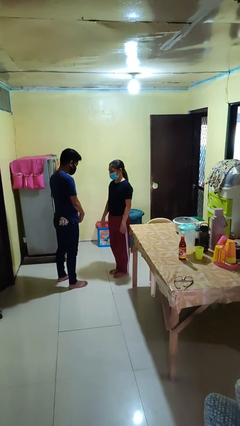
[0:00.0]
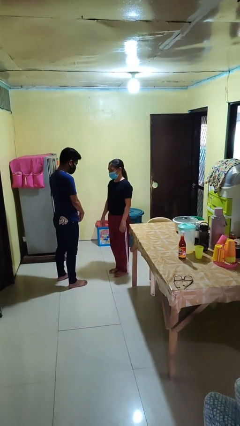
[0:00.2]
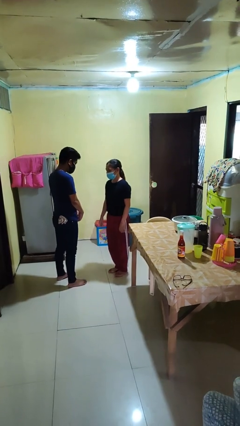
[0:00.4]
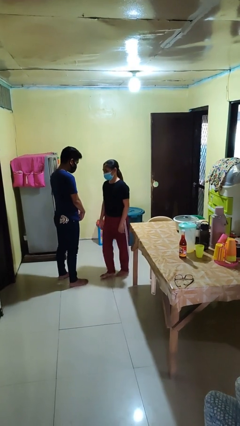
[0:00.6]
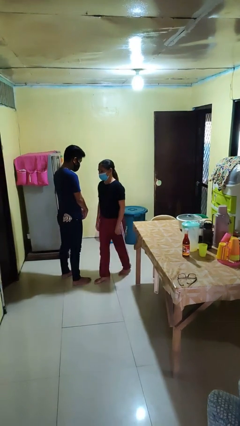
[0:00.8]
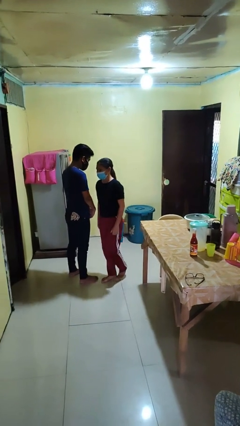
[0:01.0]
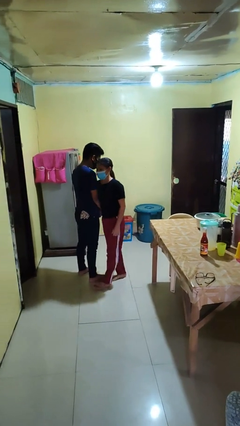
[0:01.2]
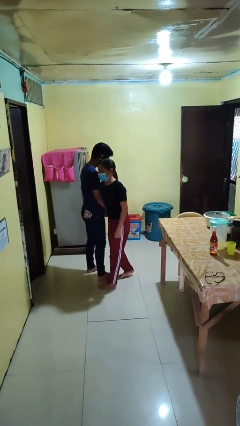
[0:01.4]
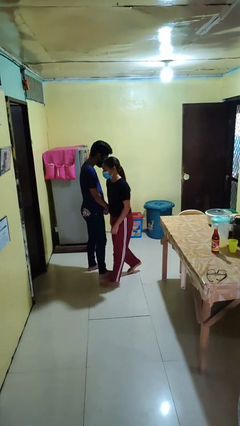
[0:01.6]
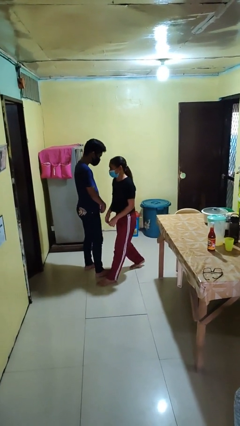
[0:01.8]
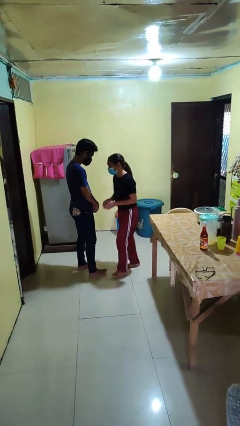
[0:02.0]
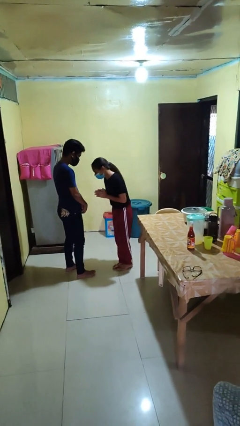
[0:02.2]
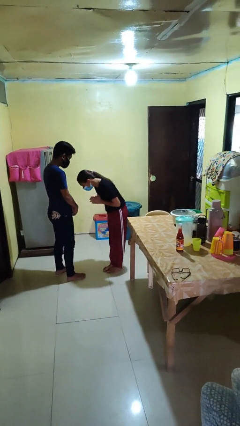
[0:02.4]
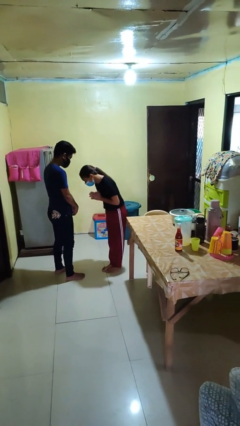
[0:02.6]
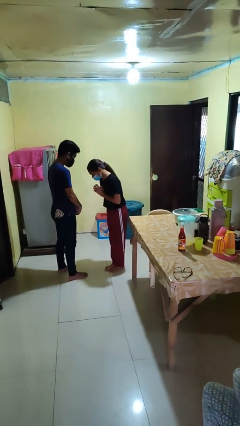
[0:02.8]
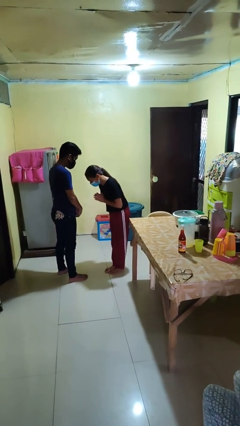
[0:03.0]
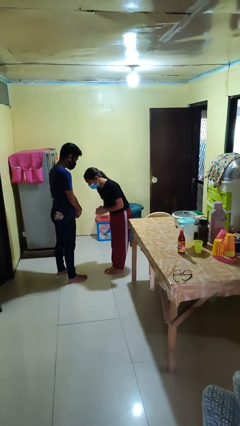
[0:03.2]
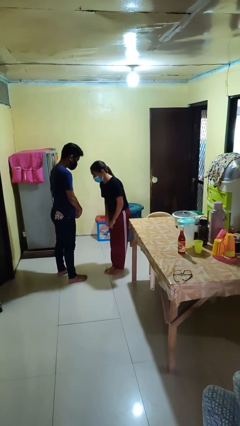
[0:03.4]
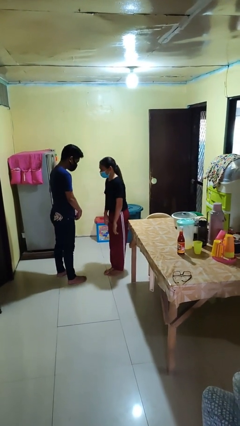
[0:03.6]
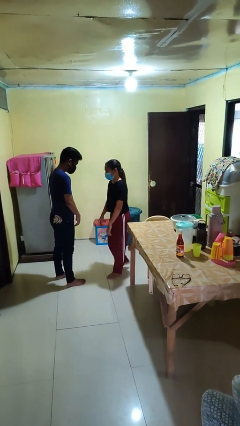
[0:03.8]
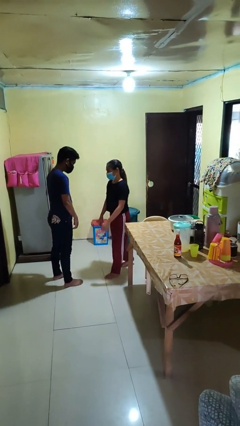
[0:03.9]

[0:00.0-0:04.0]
person bumps into person

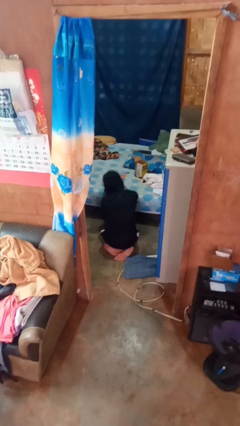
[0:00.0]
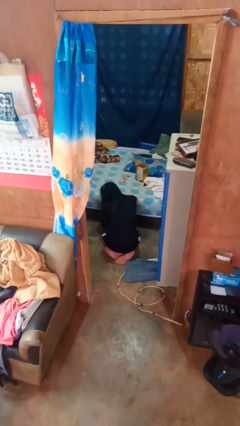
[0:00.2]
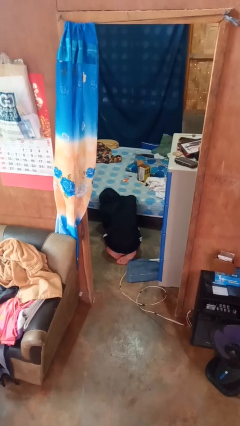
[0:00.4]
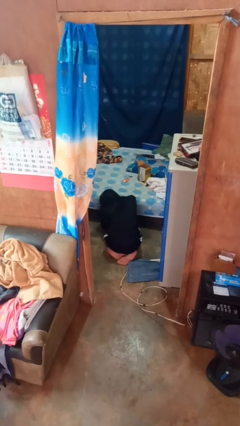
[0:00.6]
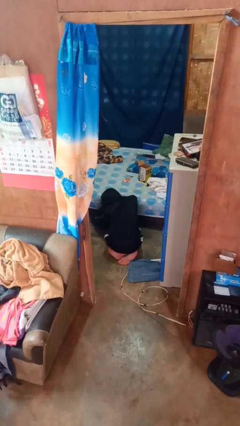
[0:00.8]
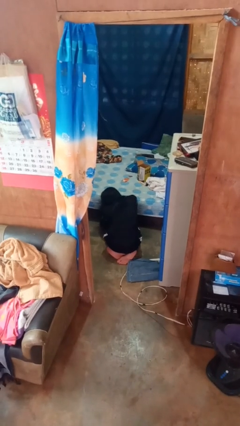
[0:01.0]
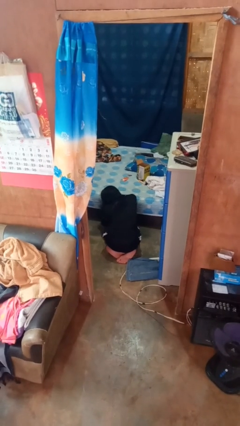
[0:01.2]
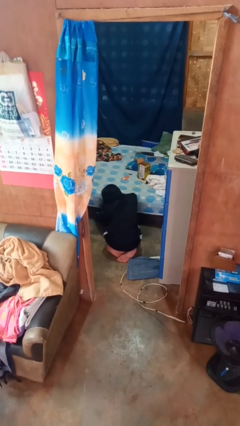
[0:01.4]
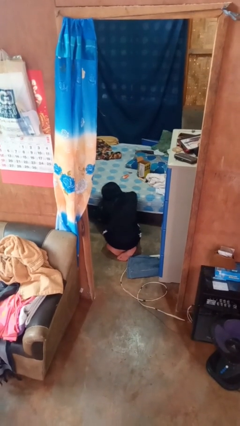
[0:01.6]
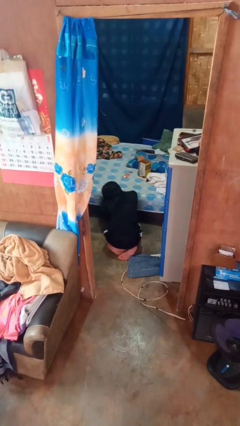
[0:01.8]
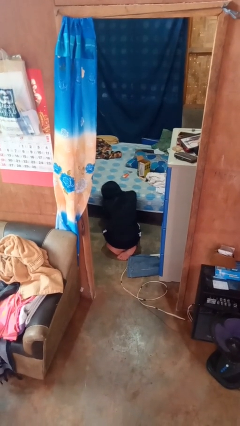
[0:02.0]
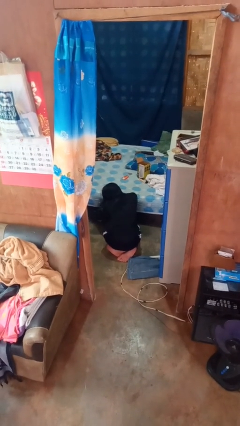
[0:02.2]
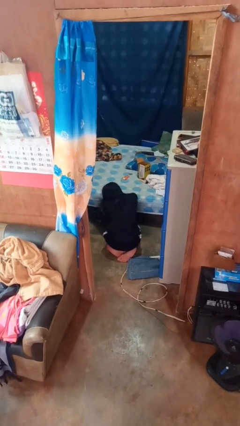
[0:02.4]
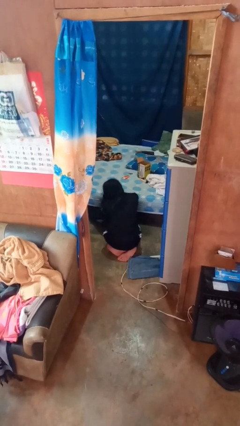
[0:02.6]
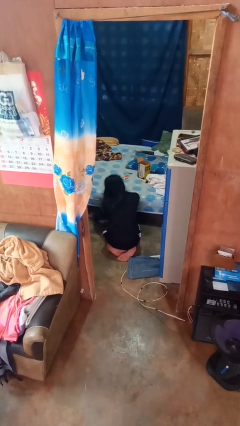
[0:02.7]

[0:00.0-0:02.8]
person searches under bed

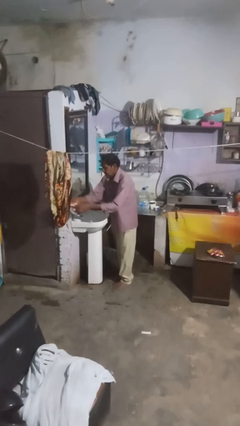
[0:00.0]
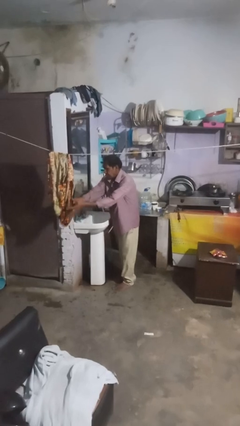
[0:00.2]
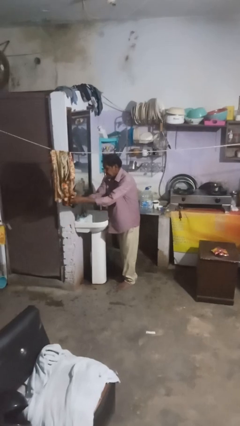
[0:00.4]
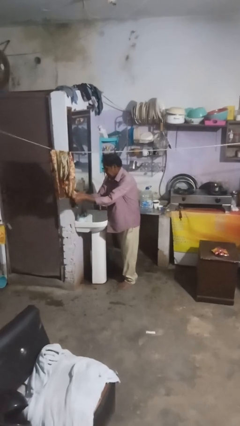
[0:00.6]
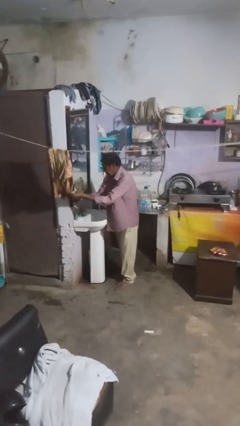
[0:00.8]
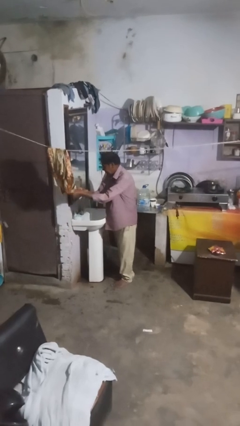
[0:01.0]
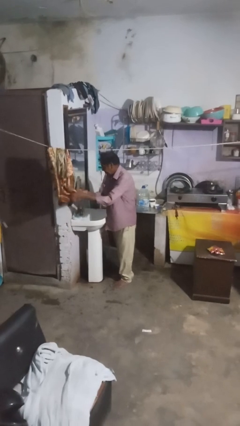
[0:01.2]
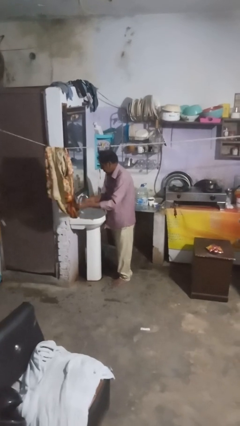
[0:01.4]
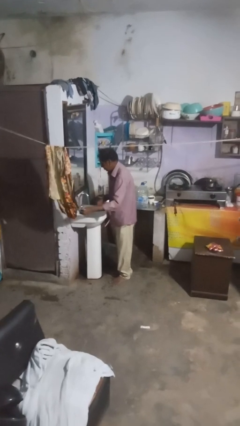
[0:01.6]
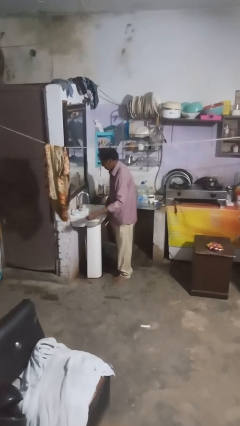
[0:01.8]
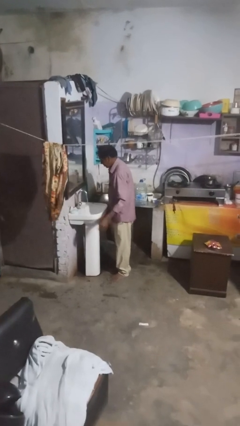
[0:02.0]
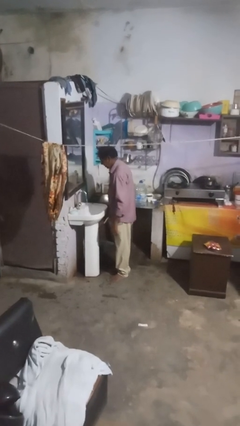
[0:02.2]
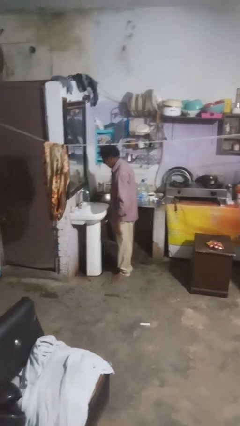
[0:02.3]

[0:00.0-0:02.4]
person dries hands with towel

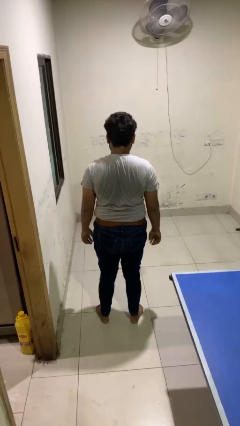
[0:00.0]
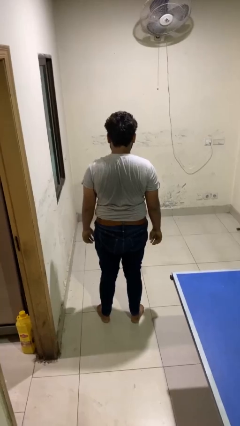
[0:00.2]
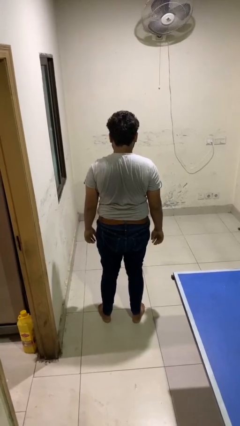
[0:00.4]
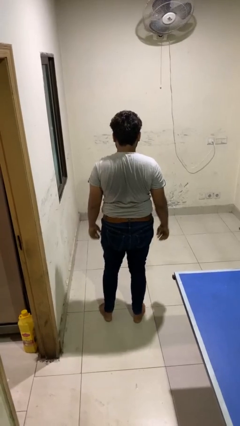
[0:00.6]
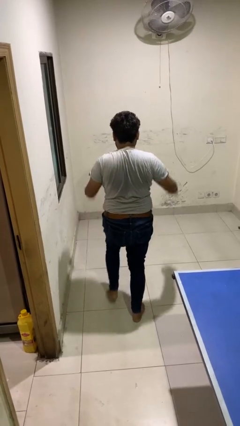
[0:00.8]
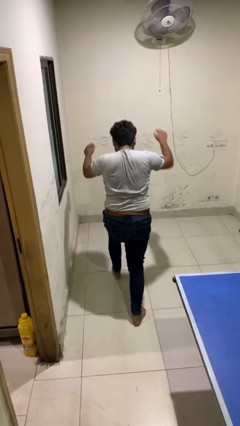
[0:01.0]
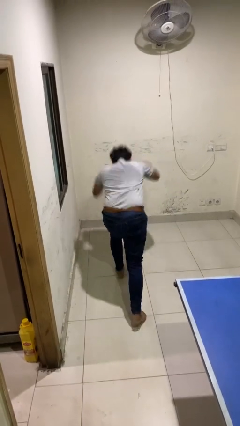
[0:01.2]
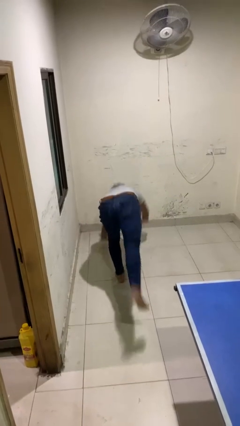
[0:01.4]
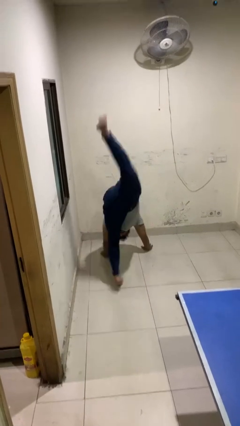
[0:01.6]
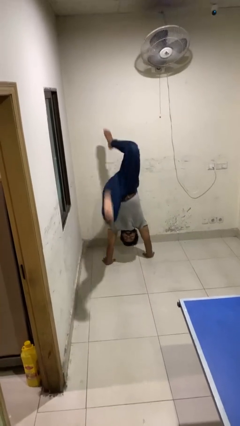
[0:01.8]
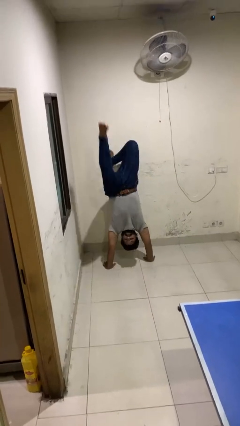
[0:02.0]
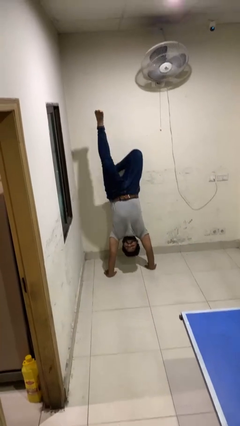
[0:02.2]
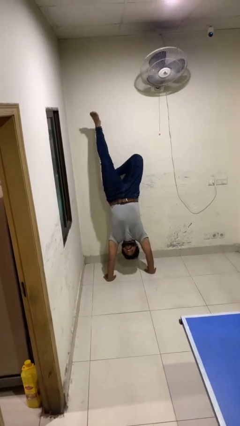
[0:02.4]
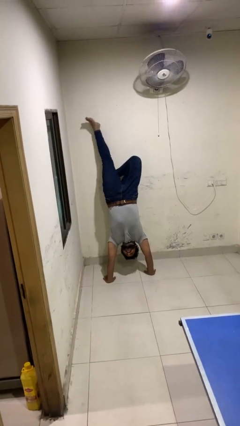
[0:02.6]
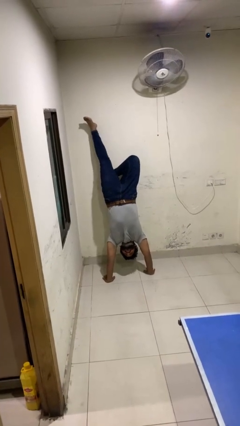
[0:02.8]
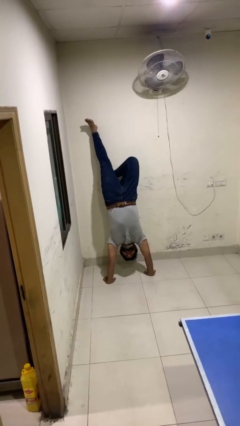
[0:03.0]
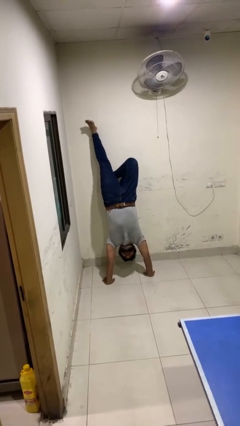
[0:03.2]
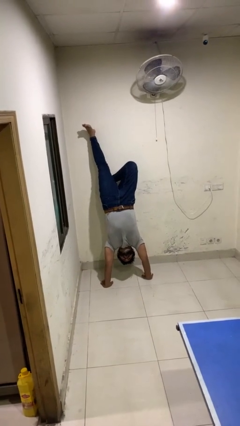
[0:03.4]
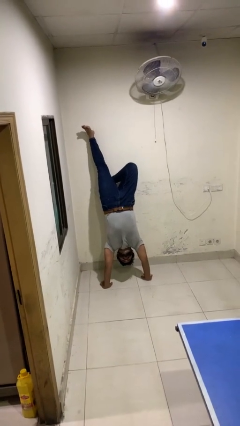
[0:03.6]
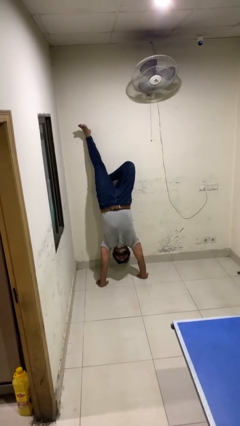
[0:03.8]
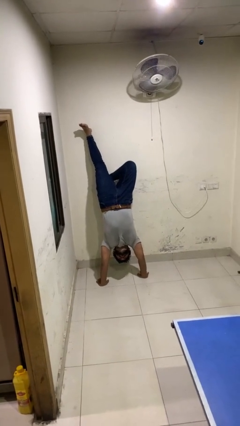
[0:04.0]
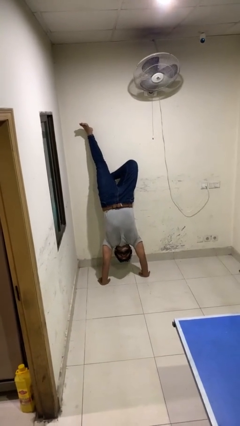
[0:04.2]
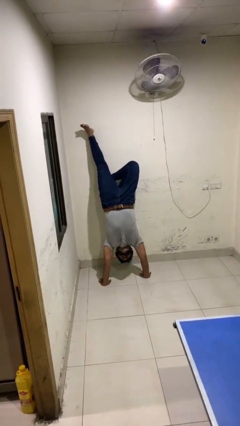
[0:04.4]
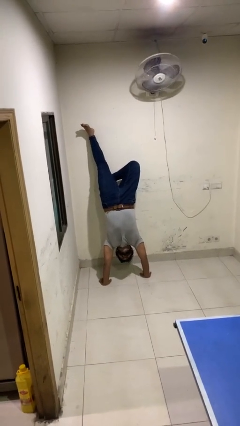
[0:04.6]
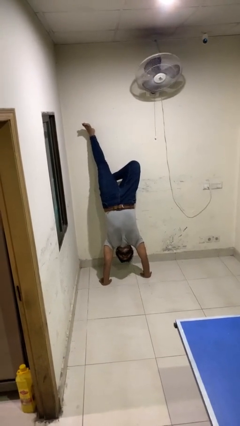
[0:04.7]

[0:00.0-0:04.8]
person handstand

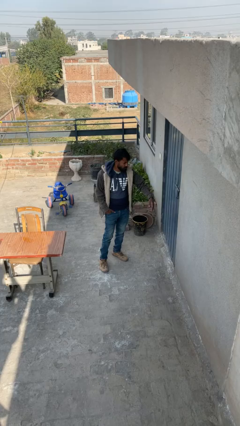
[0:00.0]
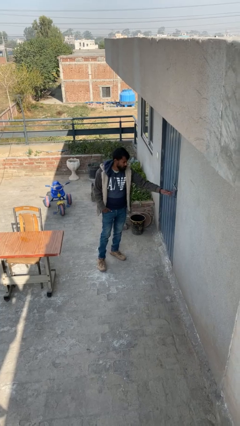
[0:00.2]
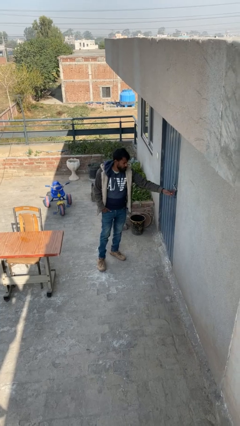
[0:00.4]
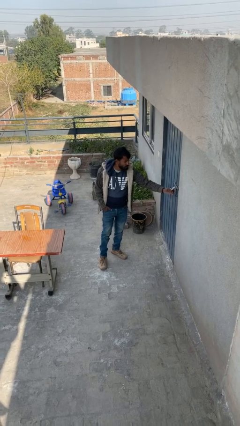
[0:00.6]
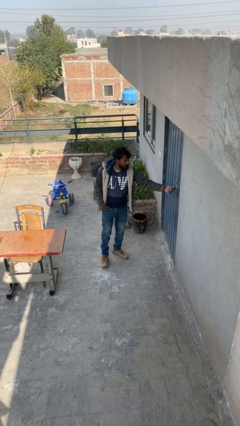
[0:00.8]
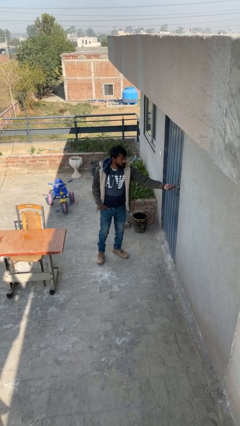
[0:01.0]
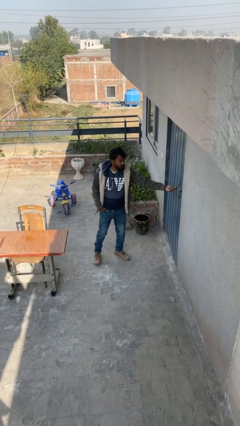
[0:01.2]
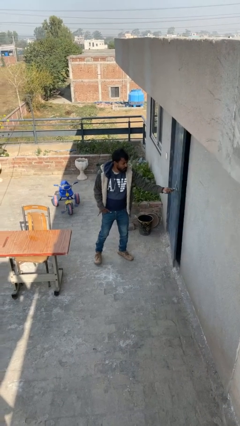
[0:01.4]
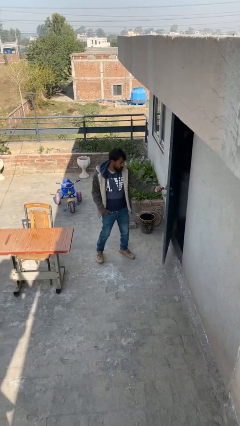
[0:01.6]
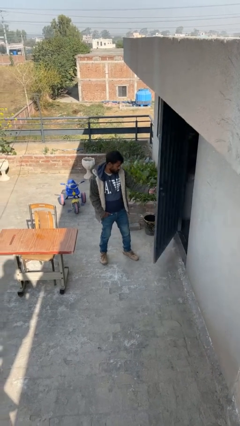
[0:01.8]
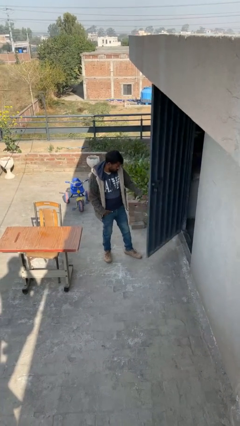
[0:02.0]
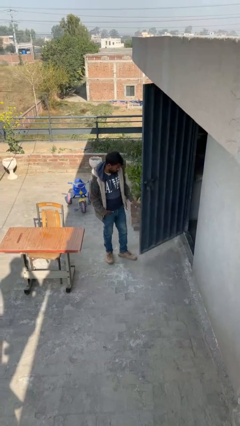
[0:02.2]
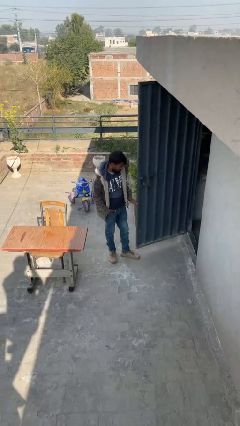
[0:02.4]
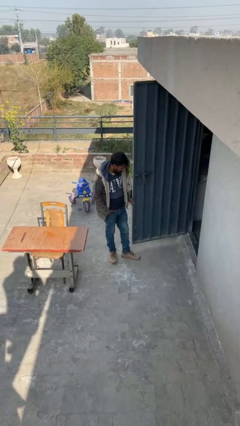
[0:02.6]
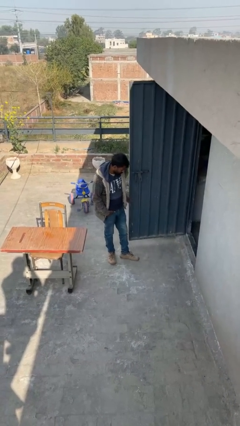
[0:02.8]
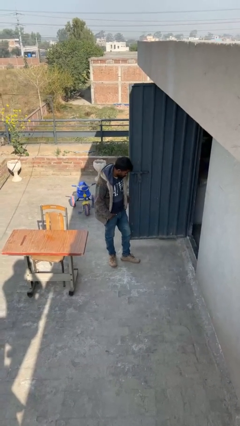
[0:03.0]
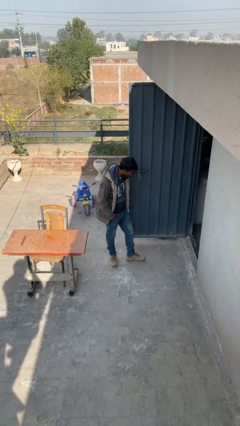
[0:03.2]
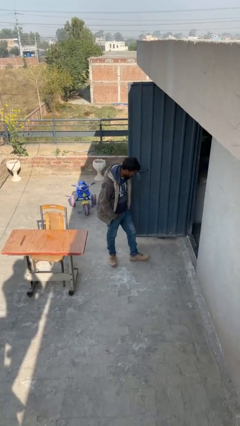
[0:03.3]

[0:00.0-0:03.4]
person opens facility door

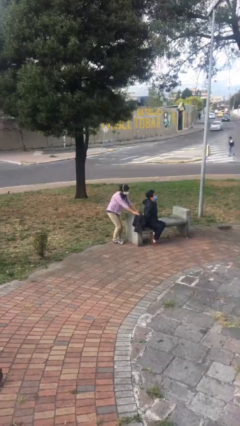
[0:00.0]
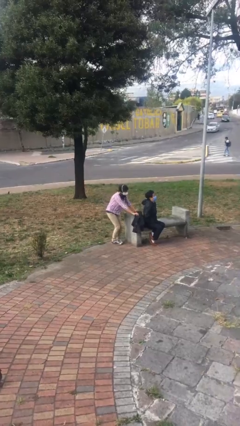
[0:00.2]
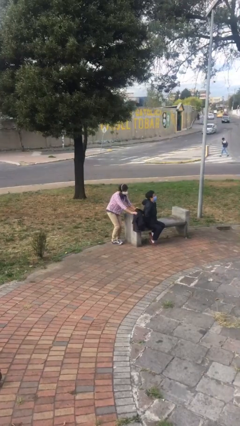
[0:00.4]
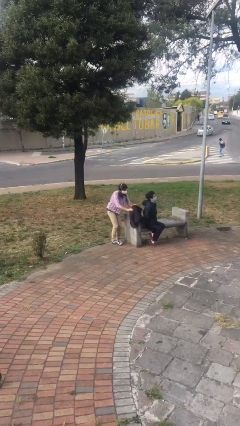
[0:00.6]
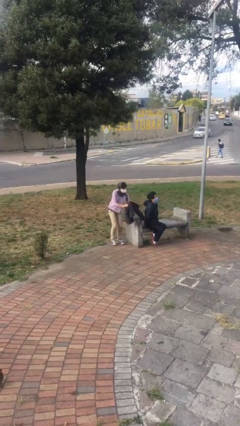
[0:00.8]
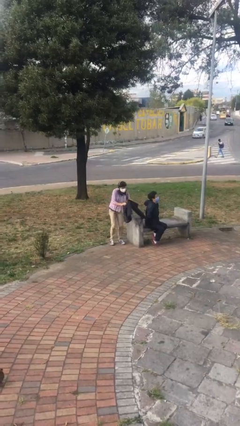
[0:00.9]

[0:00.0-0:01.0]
person steals object from person
